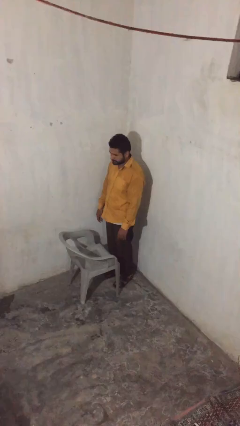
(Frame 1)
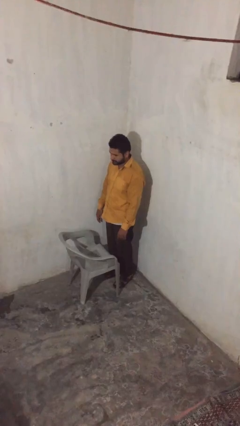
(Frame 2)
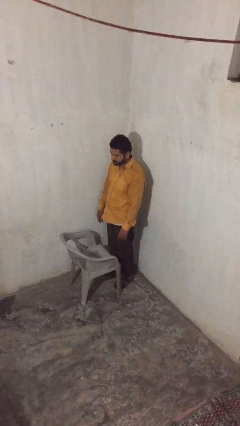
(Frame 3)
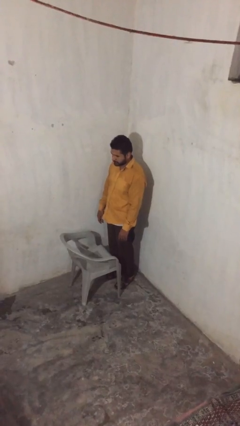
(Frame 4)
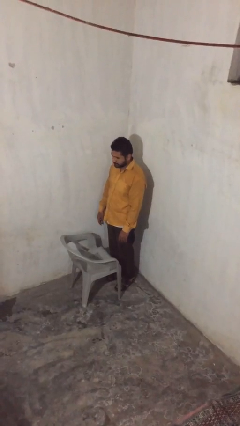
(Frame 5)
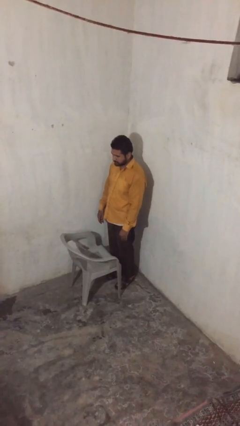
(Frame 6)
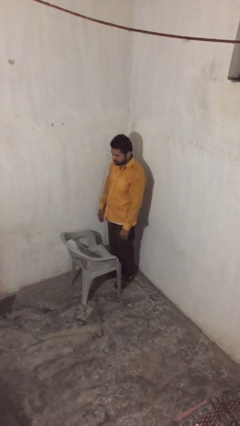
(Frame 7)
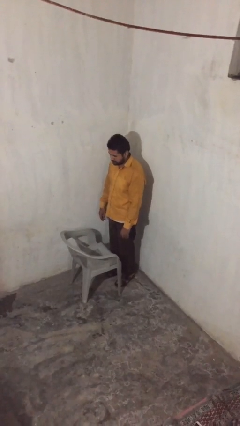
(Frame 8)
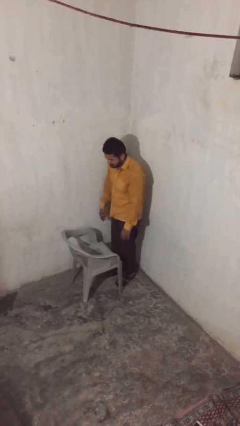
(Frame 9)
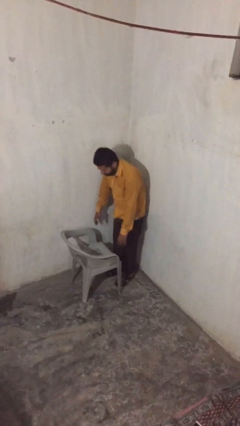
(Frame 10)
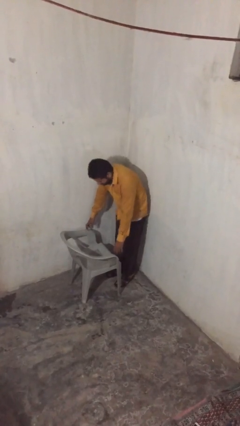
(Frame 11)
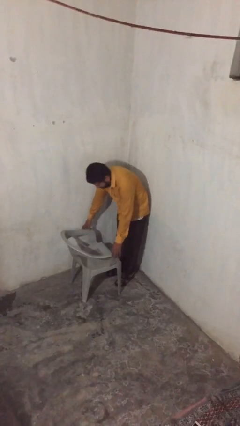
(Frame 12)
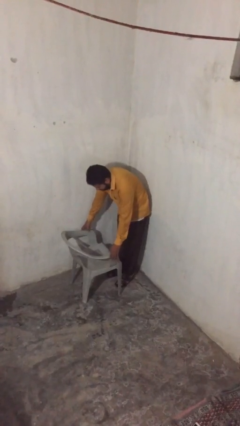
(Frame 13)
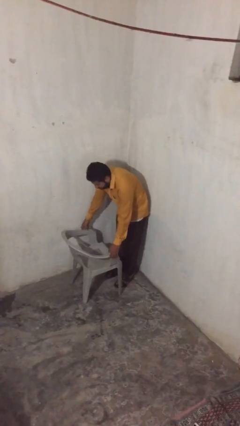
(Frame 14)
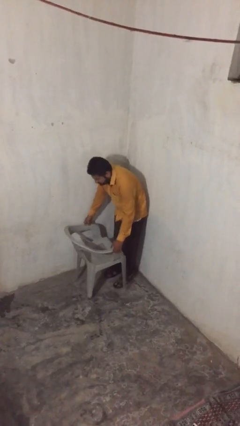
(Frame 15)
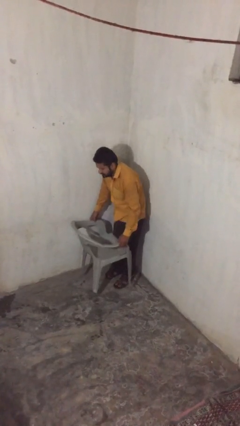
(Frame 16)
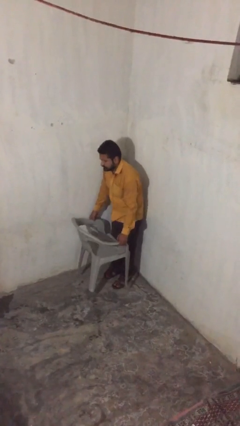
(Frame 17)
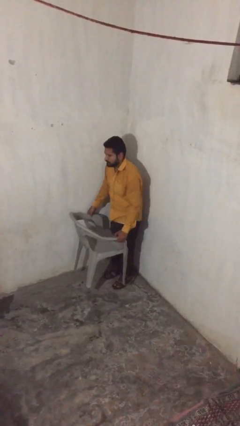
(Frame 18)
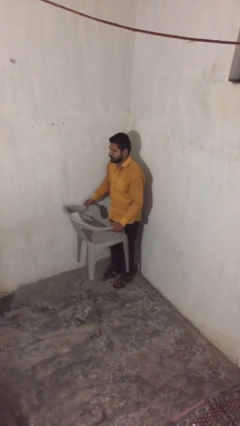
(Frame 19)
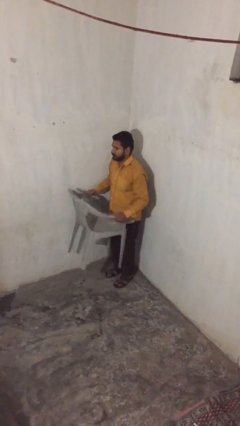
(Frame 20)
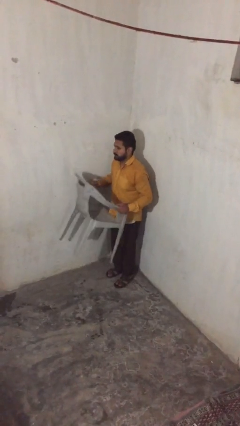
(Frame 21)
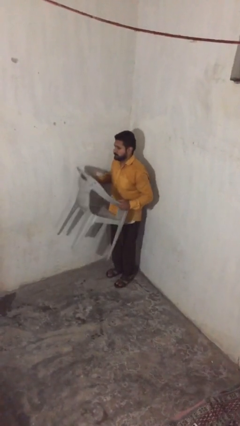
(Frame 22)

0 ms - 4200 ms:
person picks up object from floor

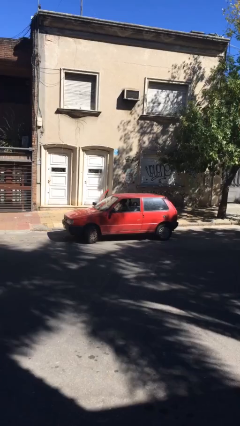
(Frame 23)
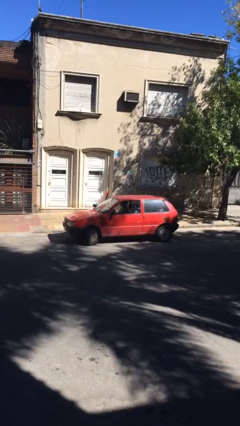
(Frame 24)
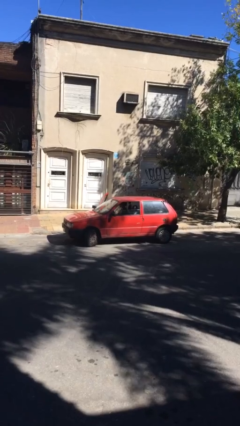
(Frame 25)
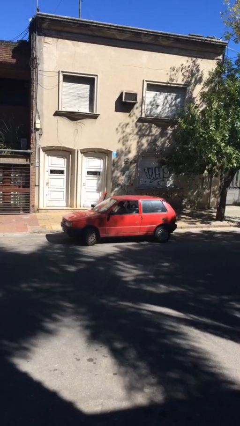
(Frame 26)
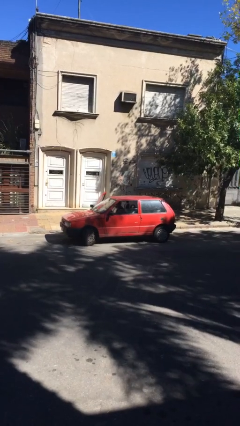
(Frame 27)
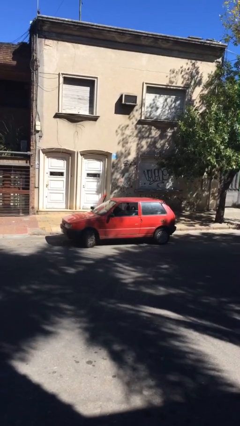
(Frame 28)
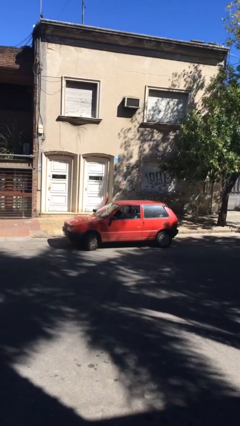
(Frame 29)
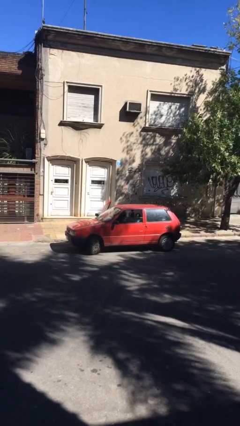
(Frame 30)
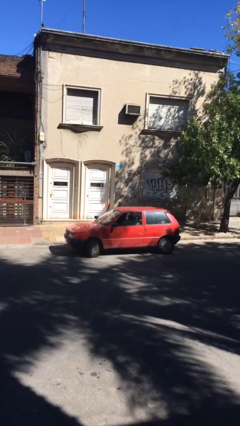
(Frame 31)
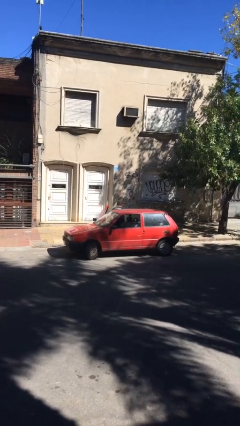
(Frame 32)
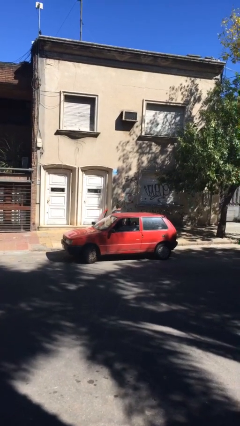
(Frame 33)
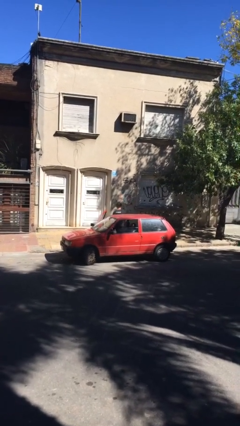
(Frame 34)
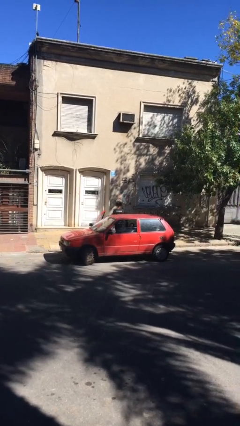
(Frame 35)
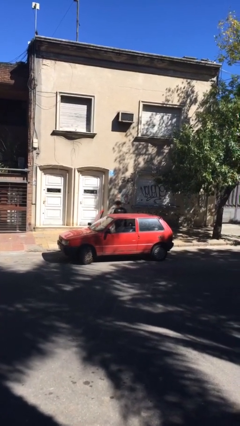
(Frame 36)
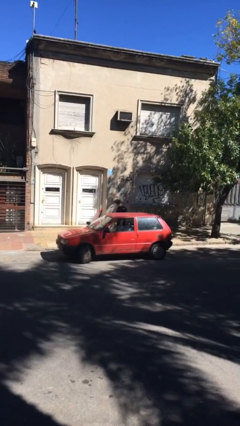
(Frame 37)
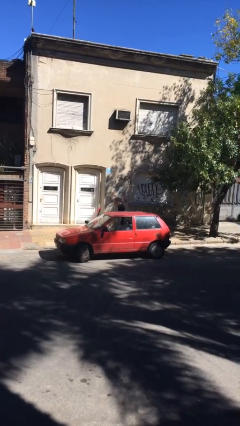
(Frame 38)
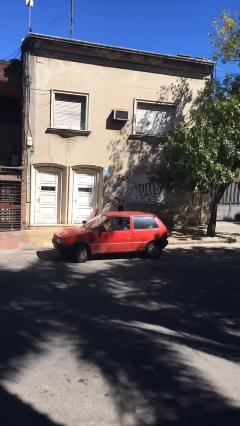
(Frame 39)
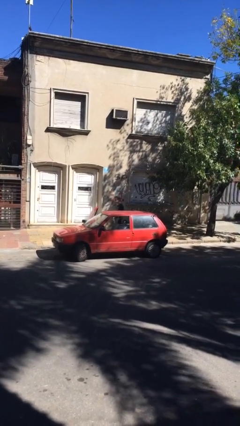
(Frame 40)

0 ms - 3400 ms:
person exits car

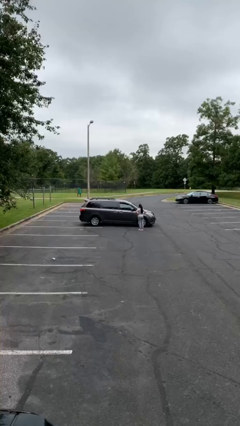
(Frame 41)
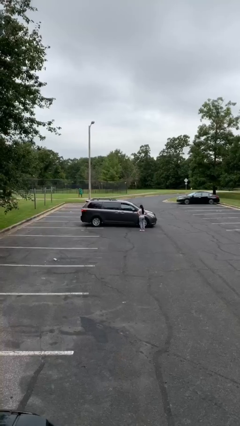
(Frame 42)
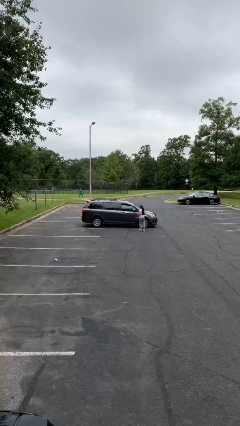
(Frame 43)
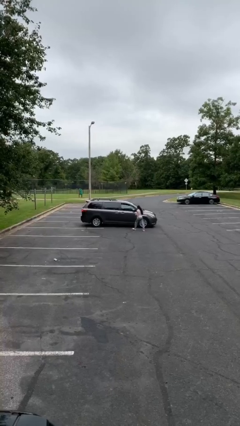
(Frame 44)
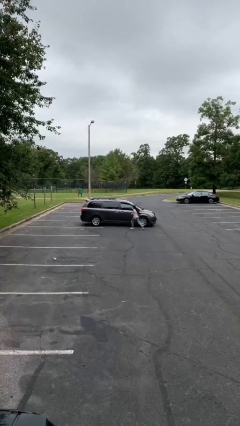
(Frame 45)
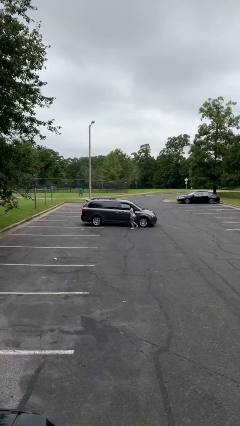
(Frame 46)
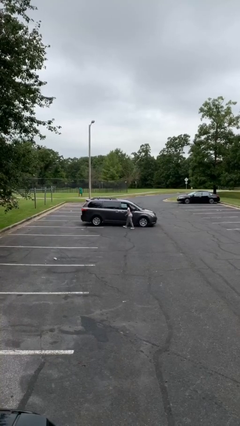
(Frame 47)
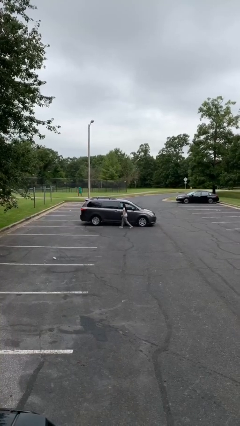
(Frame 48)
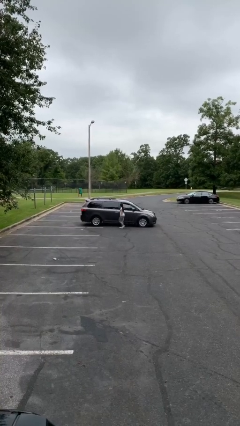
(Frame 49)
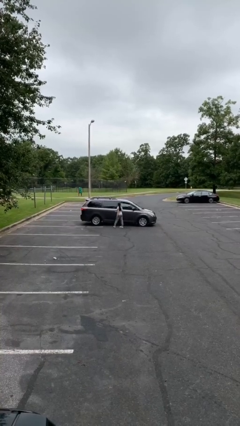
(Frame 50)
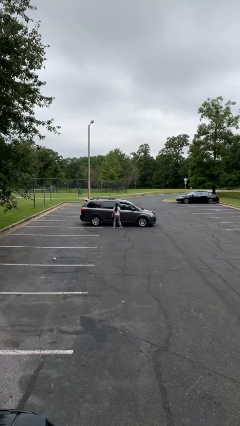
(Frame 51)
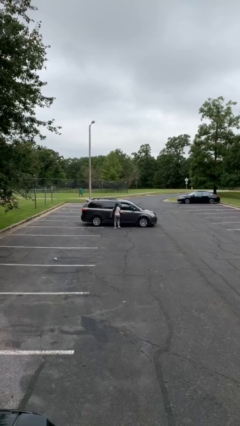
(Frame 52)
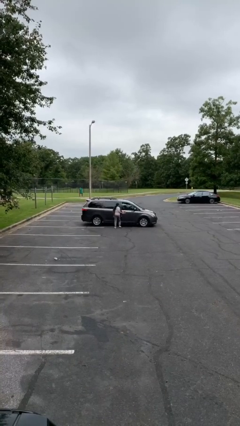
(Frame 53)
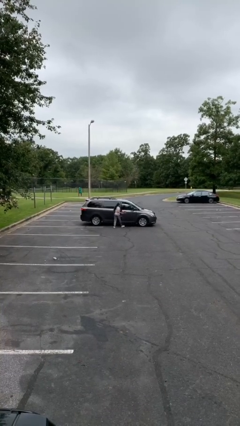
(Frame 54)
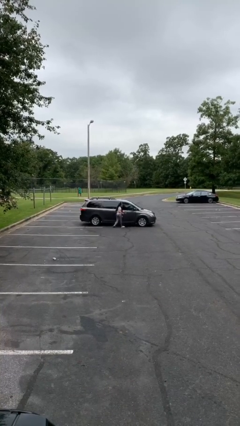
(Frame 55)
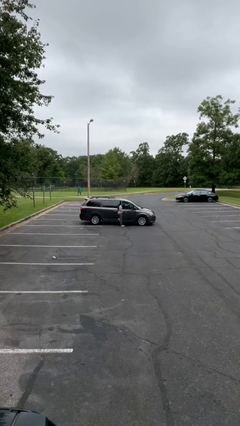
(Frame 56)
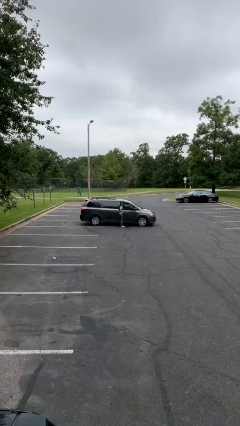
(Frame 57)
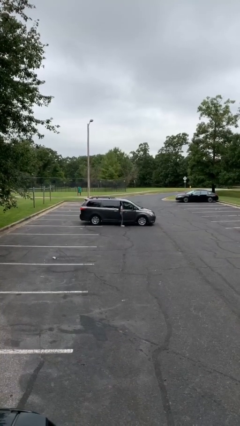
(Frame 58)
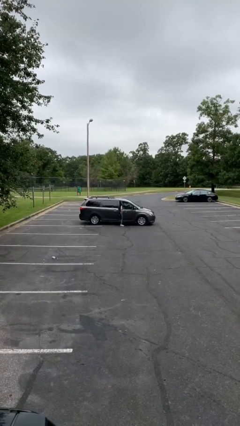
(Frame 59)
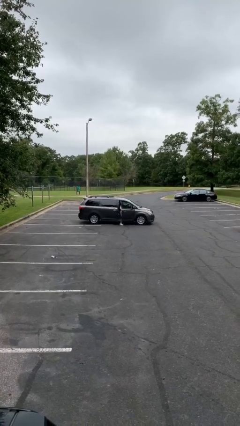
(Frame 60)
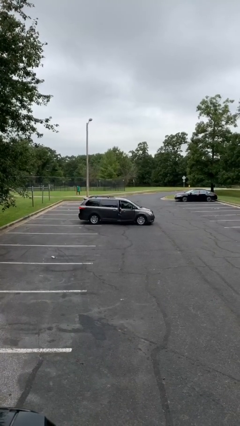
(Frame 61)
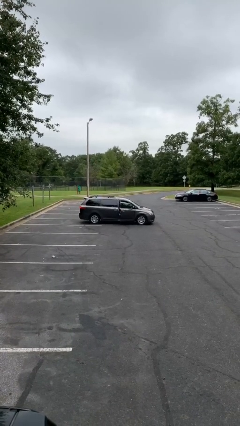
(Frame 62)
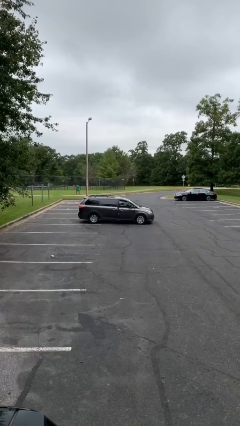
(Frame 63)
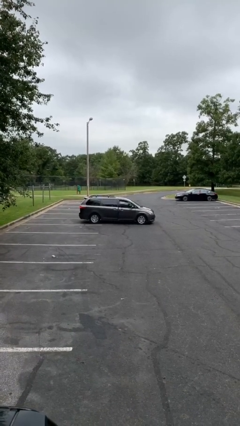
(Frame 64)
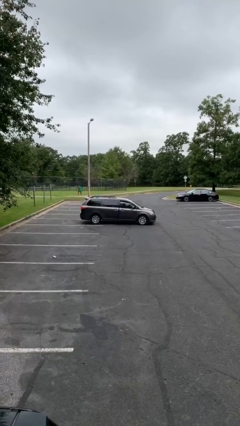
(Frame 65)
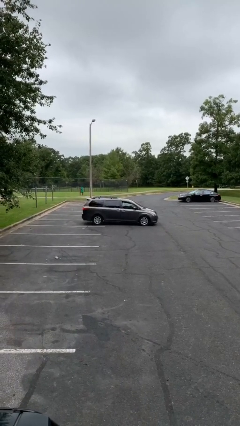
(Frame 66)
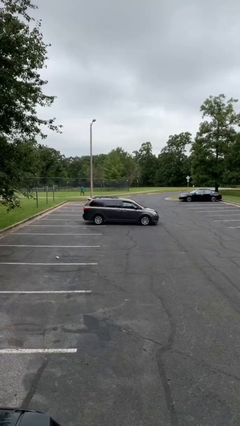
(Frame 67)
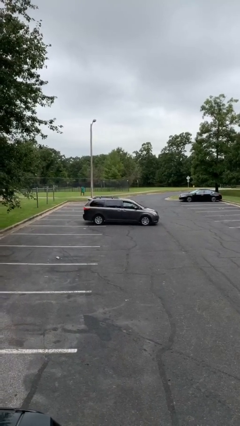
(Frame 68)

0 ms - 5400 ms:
car picks up person

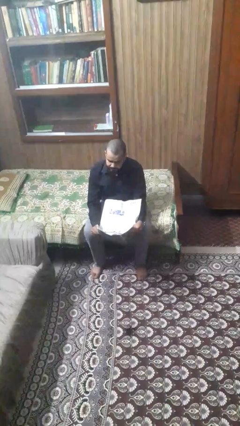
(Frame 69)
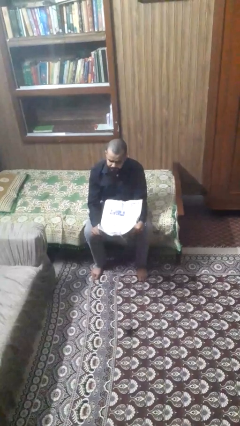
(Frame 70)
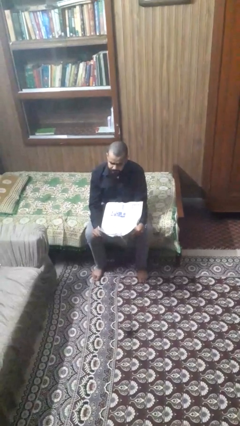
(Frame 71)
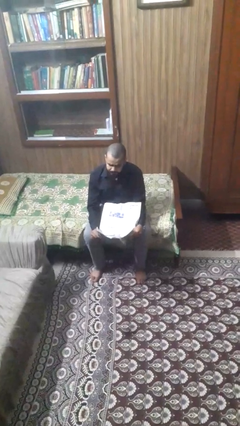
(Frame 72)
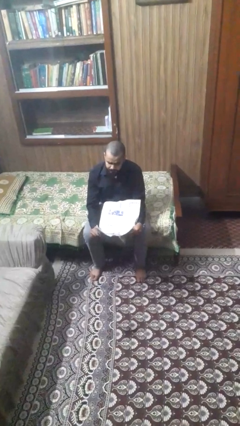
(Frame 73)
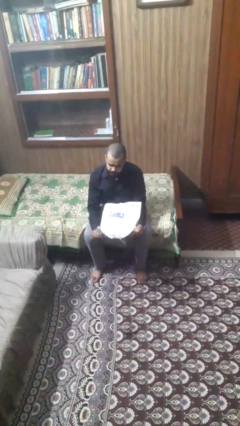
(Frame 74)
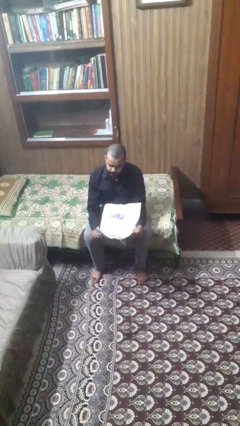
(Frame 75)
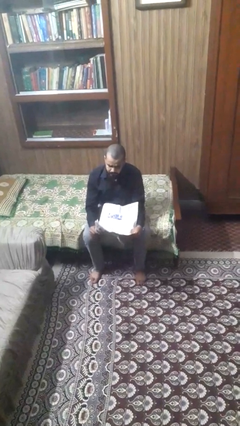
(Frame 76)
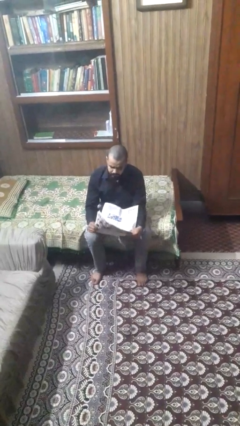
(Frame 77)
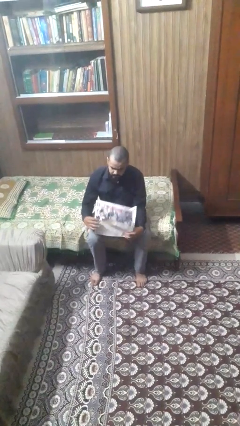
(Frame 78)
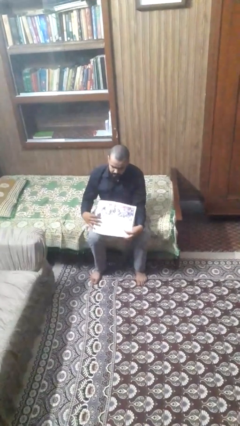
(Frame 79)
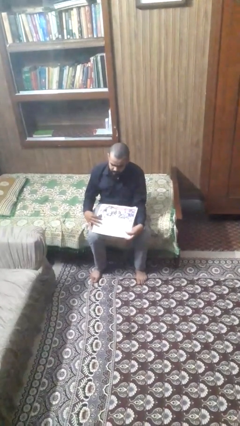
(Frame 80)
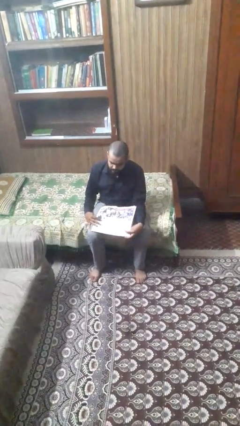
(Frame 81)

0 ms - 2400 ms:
person reads newspaper

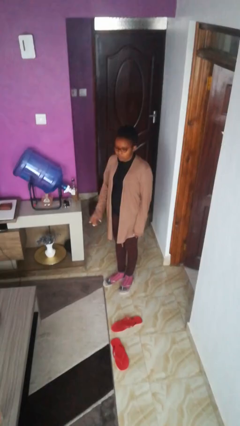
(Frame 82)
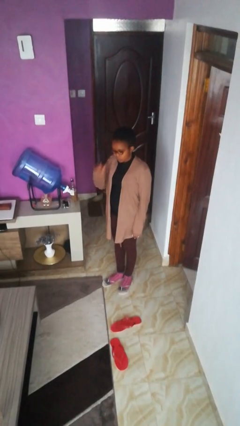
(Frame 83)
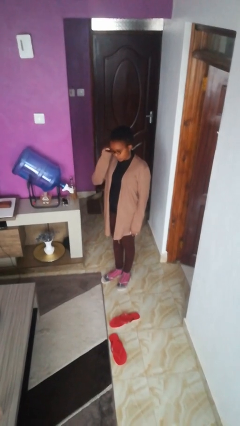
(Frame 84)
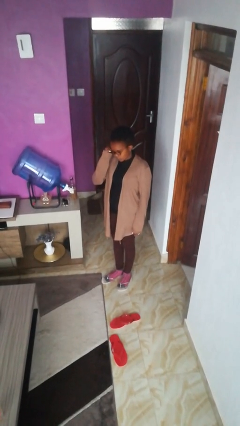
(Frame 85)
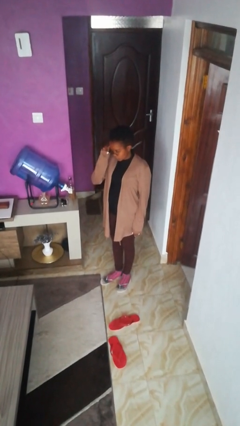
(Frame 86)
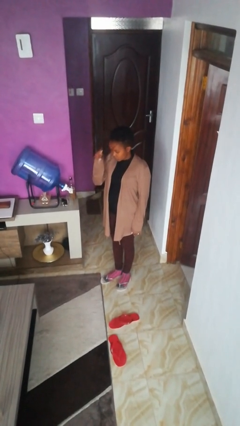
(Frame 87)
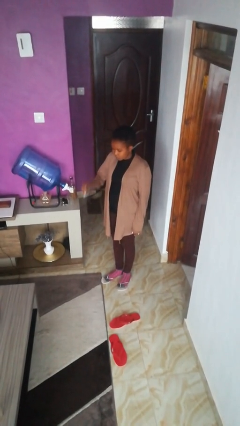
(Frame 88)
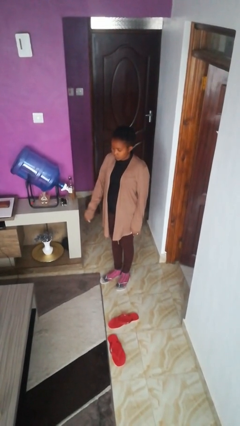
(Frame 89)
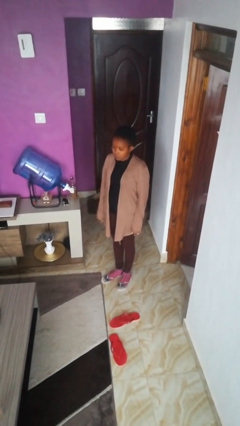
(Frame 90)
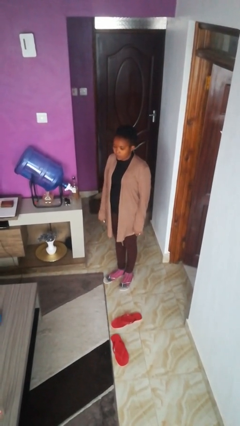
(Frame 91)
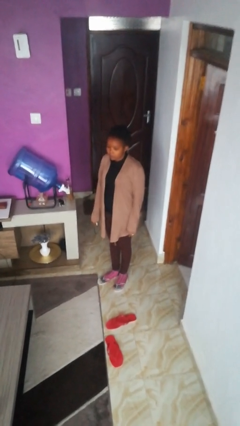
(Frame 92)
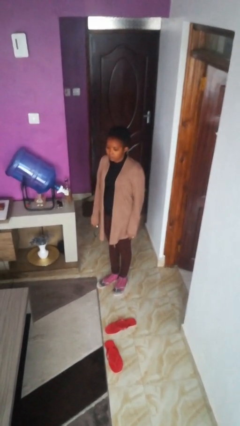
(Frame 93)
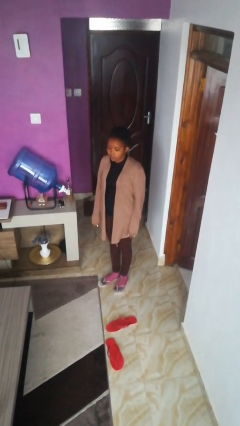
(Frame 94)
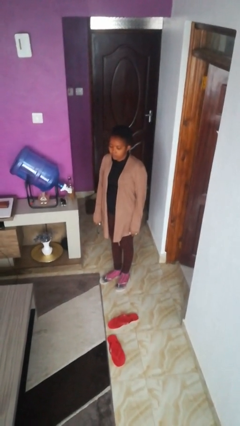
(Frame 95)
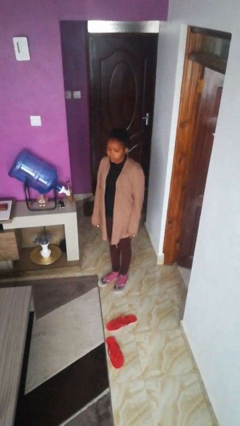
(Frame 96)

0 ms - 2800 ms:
person takes off glasses
